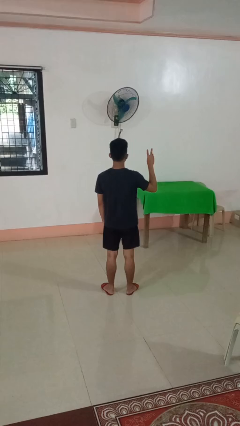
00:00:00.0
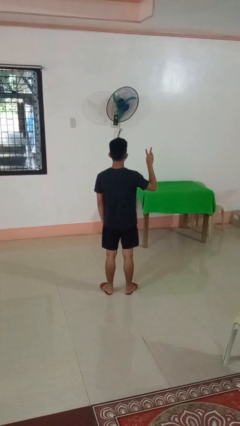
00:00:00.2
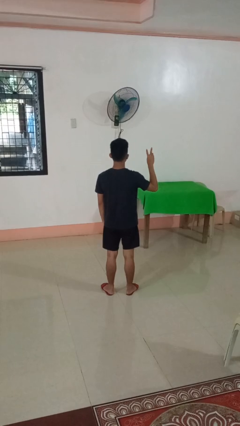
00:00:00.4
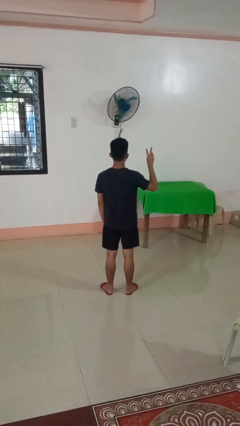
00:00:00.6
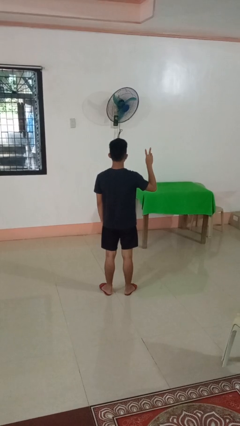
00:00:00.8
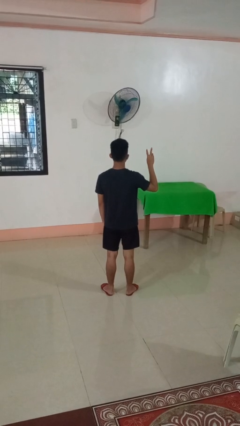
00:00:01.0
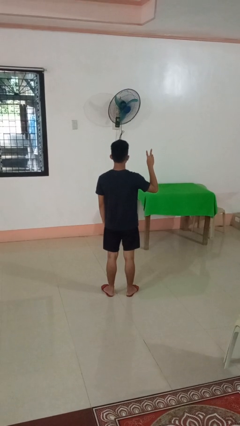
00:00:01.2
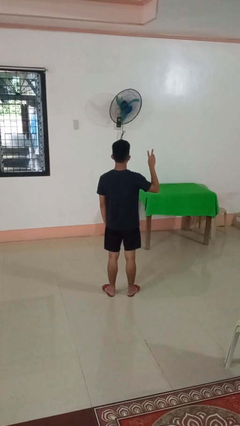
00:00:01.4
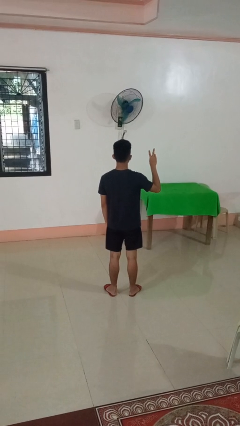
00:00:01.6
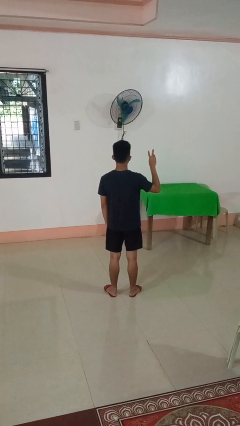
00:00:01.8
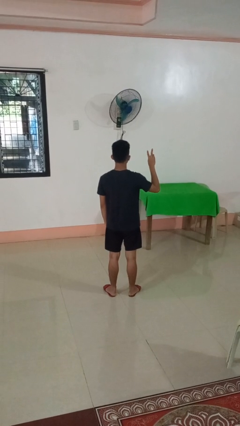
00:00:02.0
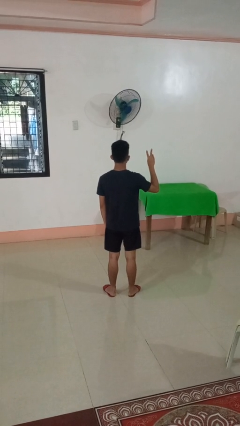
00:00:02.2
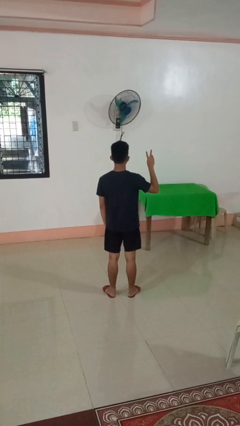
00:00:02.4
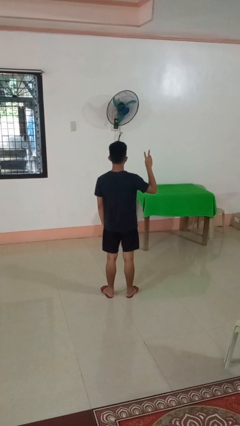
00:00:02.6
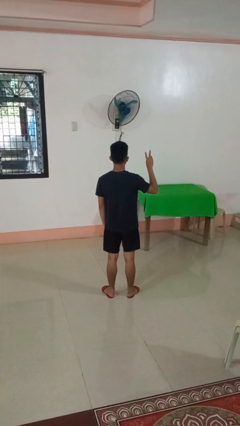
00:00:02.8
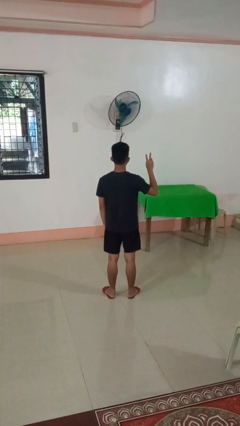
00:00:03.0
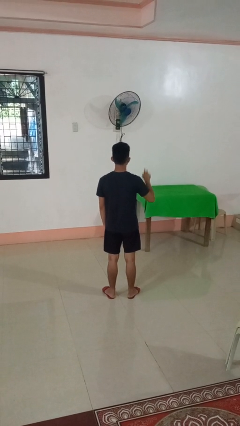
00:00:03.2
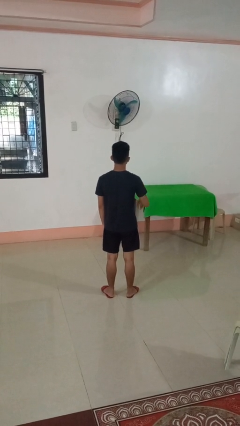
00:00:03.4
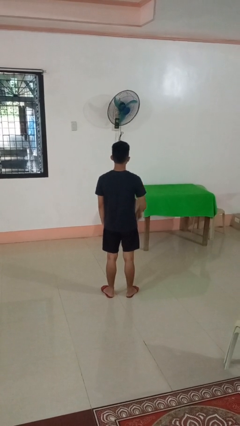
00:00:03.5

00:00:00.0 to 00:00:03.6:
person gestures peace

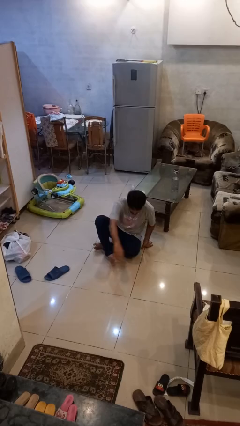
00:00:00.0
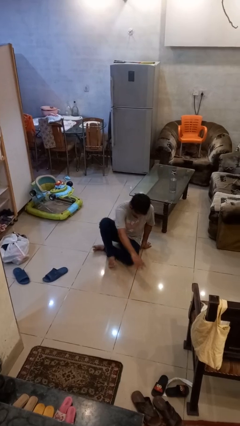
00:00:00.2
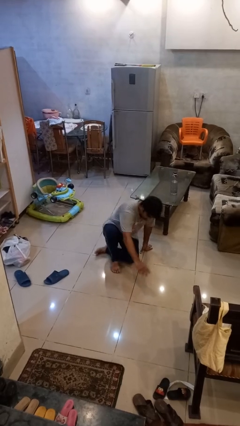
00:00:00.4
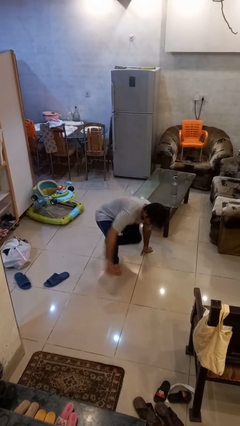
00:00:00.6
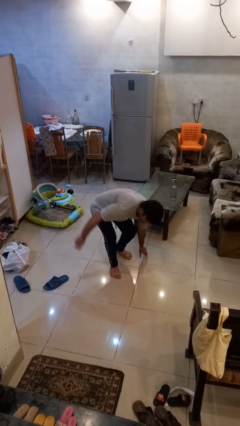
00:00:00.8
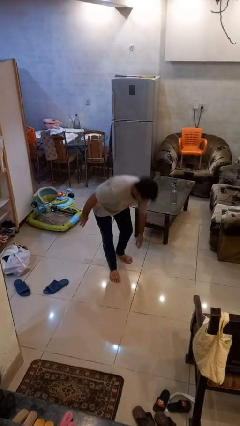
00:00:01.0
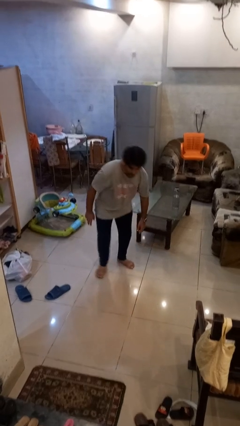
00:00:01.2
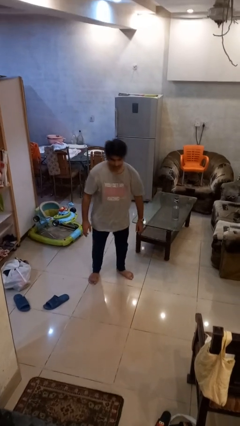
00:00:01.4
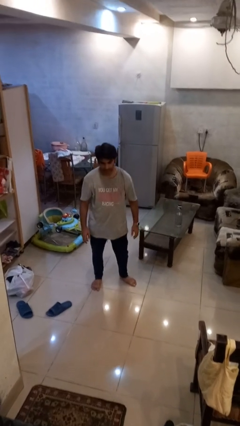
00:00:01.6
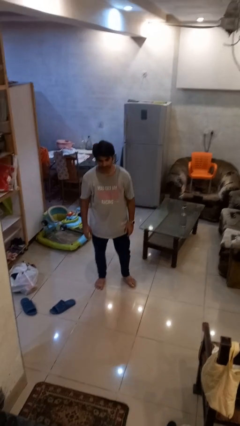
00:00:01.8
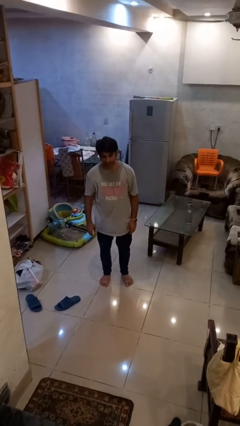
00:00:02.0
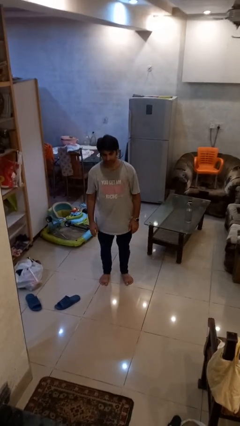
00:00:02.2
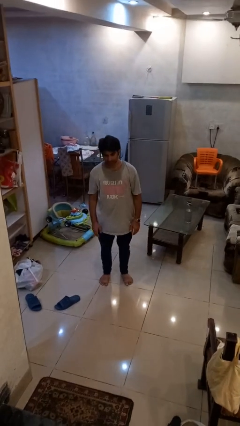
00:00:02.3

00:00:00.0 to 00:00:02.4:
person stands up from floor

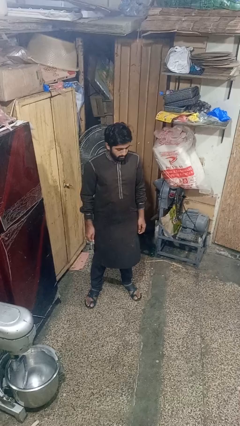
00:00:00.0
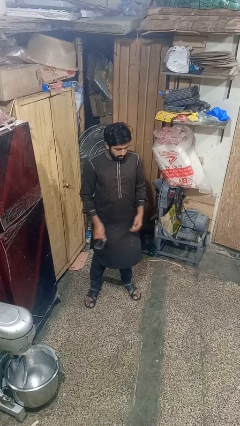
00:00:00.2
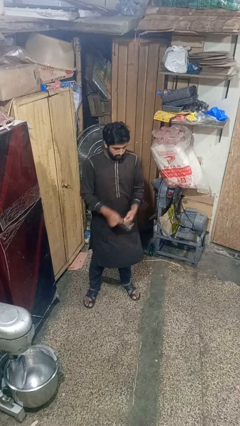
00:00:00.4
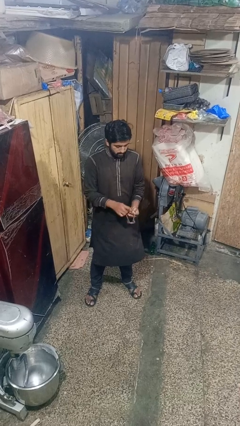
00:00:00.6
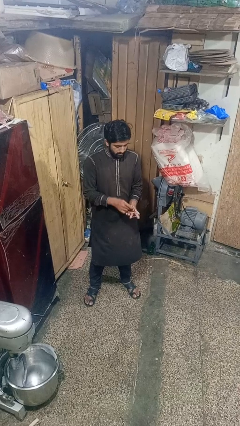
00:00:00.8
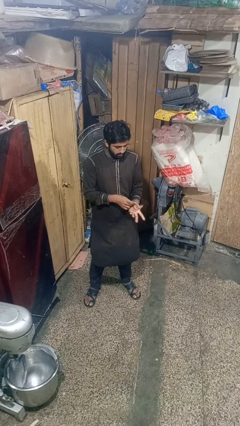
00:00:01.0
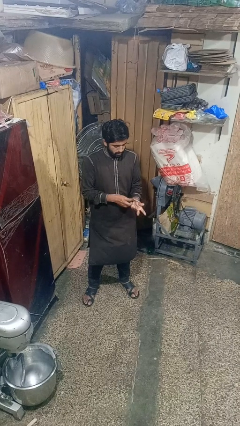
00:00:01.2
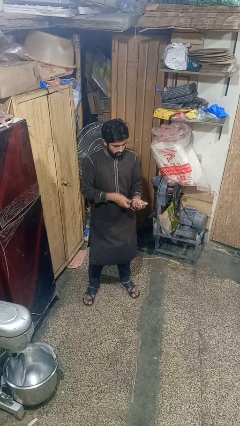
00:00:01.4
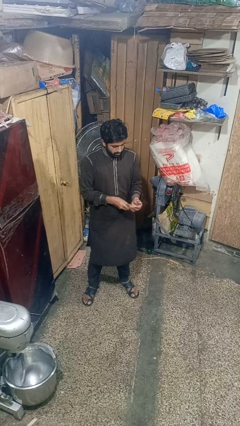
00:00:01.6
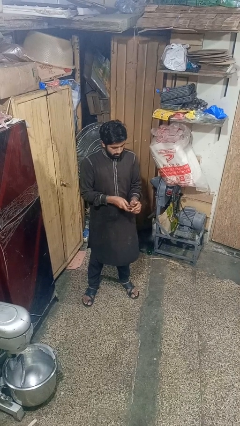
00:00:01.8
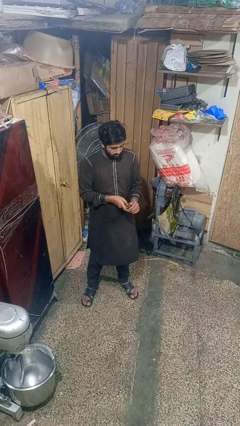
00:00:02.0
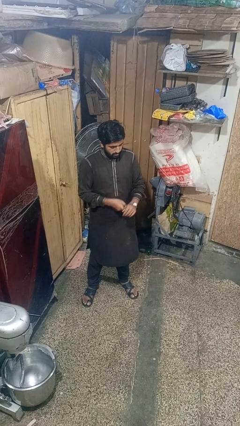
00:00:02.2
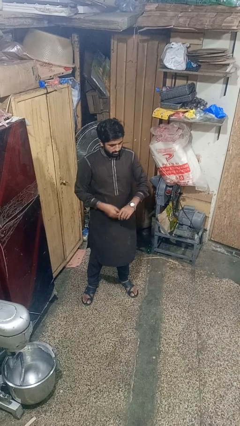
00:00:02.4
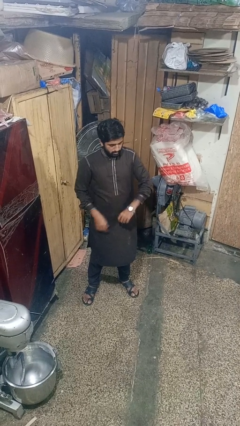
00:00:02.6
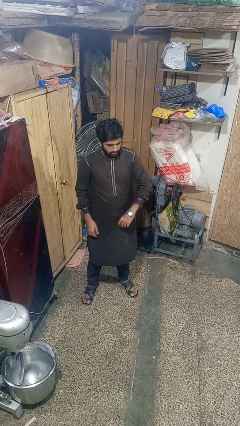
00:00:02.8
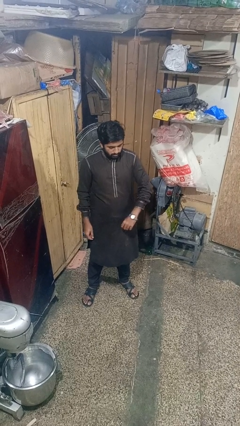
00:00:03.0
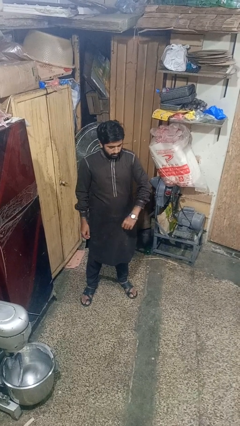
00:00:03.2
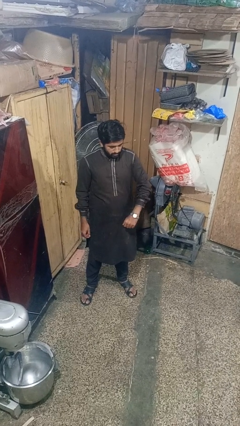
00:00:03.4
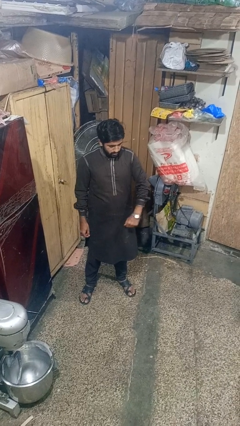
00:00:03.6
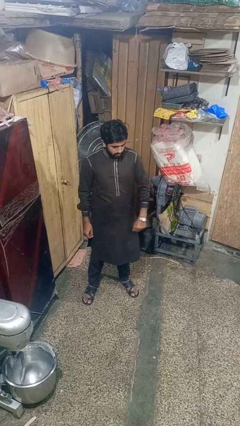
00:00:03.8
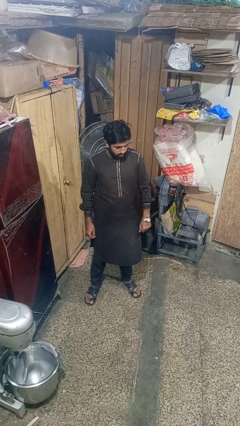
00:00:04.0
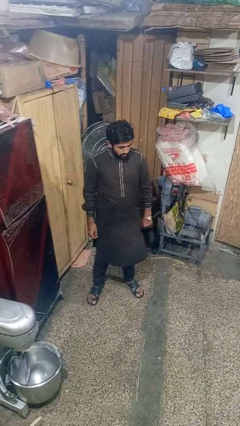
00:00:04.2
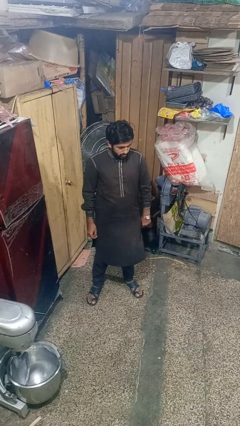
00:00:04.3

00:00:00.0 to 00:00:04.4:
person puts on wristwatch

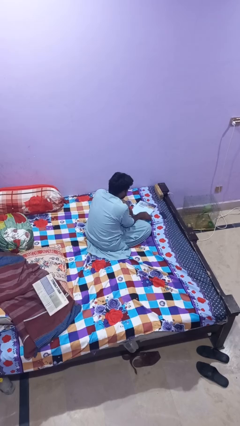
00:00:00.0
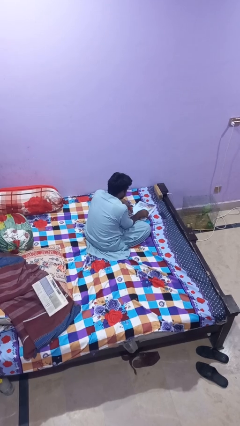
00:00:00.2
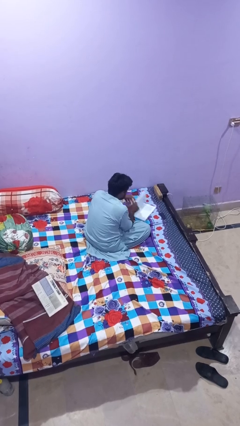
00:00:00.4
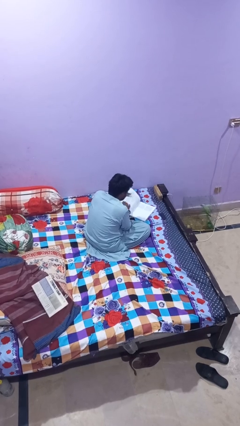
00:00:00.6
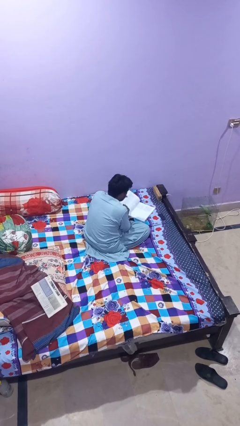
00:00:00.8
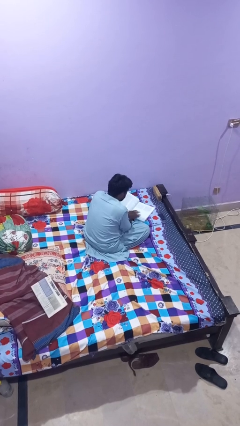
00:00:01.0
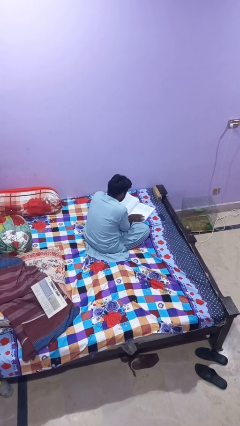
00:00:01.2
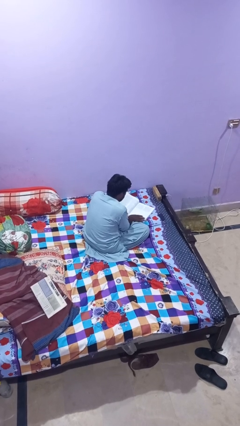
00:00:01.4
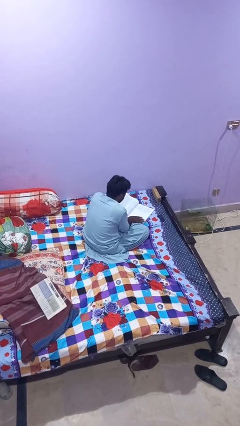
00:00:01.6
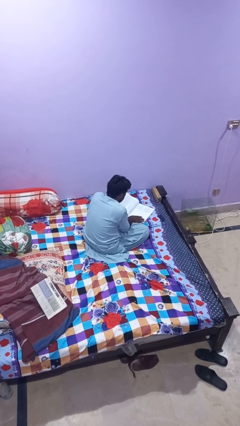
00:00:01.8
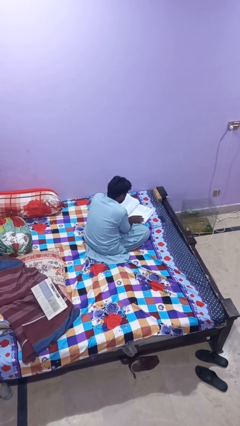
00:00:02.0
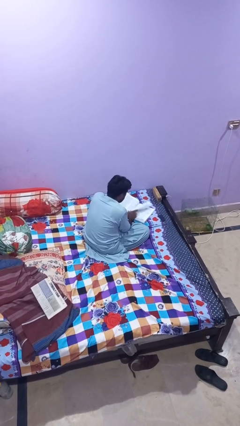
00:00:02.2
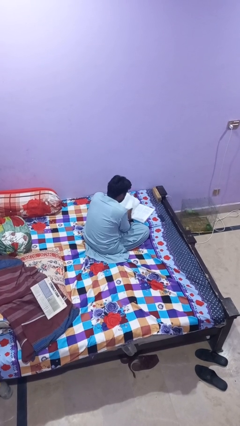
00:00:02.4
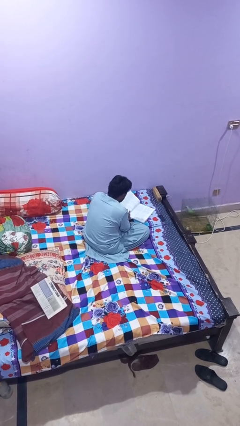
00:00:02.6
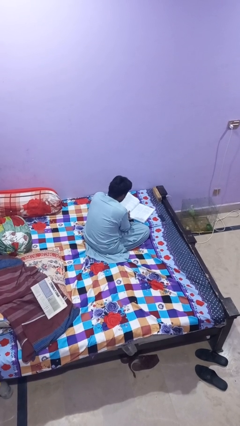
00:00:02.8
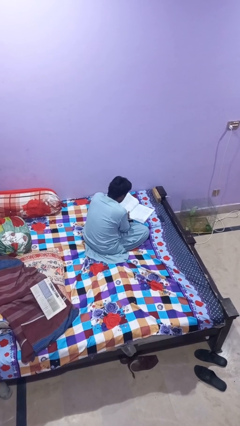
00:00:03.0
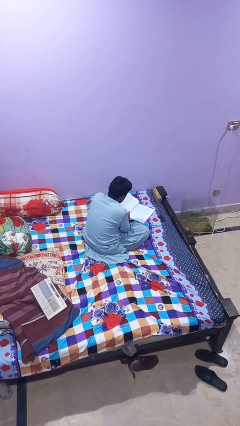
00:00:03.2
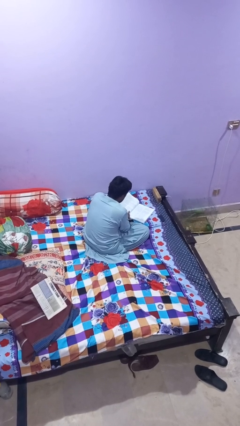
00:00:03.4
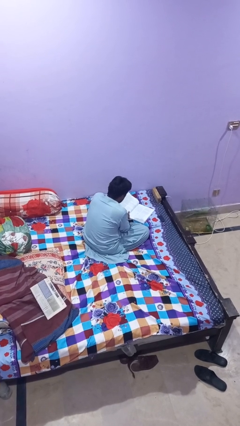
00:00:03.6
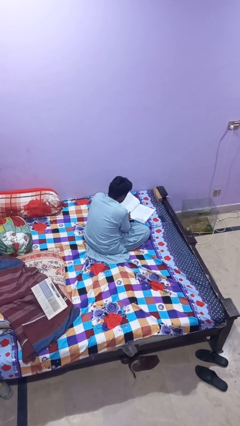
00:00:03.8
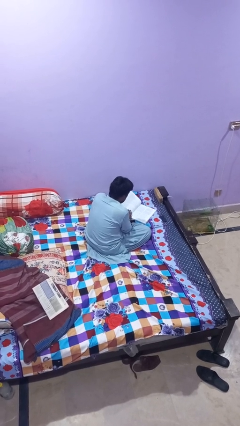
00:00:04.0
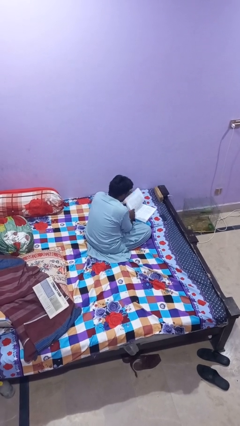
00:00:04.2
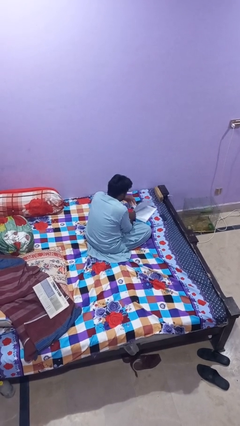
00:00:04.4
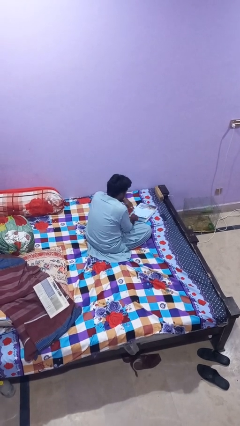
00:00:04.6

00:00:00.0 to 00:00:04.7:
person reads book

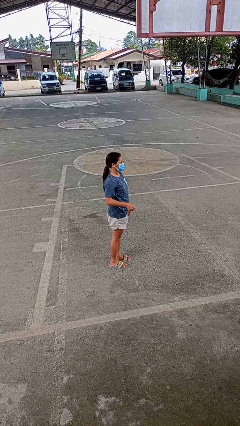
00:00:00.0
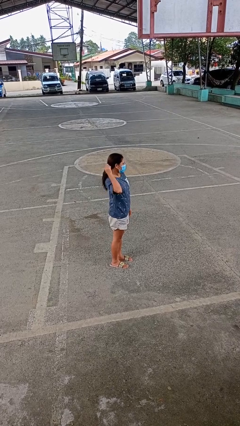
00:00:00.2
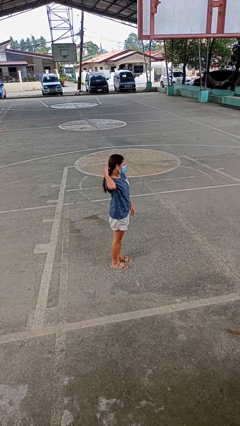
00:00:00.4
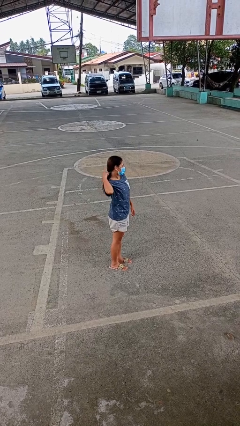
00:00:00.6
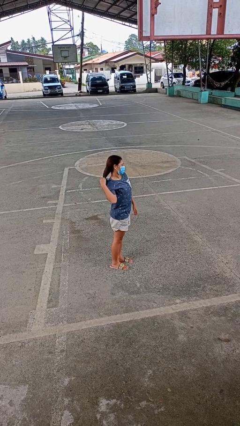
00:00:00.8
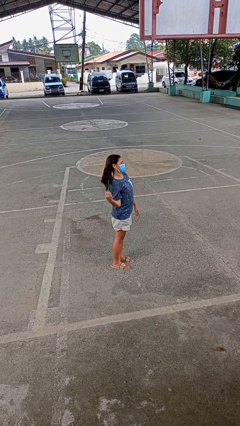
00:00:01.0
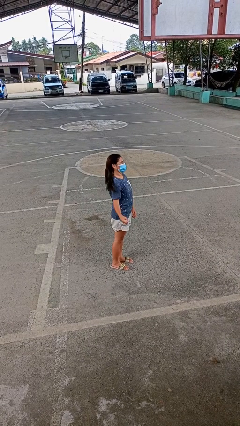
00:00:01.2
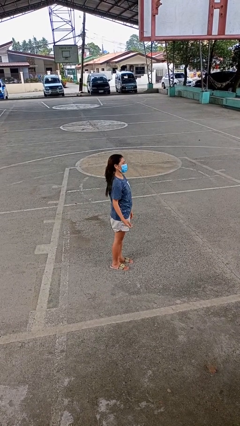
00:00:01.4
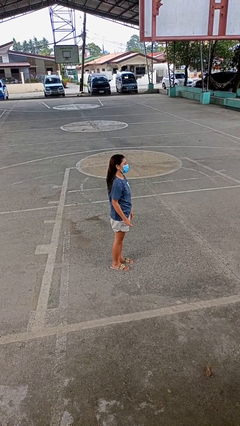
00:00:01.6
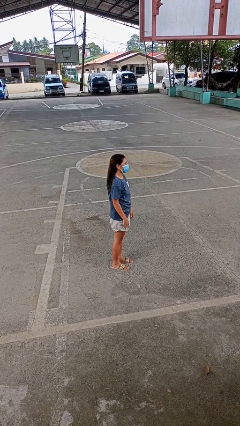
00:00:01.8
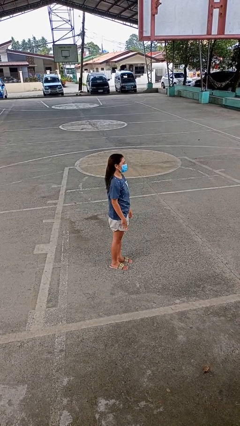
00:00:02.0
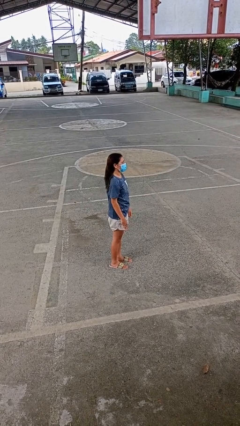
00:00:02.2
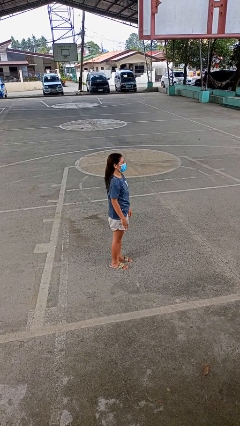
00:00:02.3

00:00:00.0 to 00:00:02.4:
person takes off hairtie

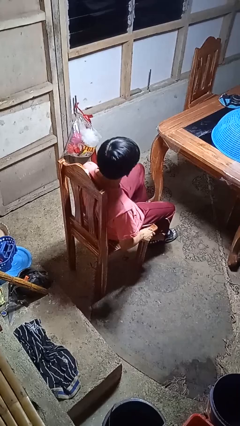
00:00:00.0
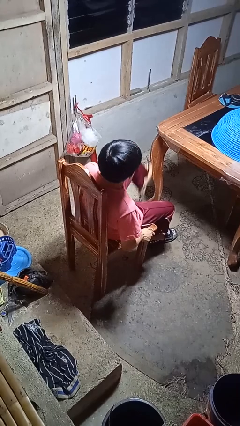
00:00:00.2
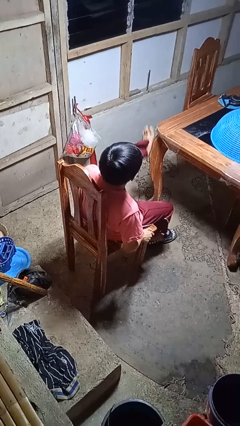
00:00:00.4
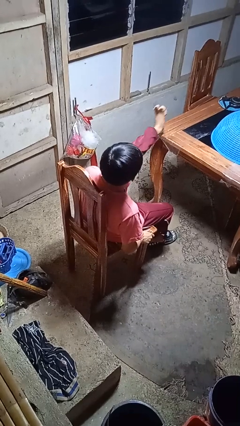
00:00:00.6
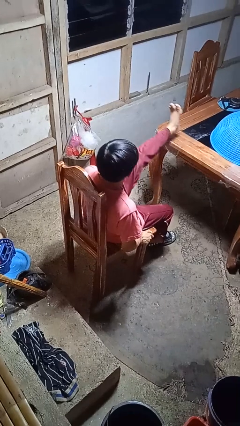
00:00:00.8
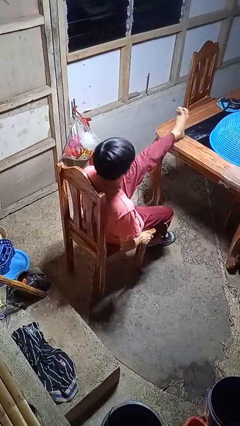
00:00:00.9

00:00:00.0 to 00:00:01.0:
person puts feet up
